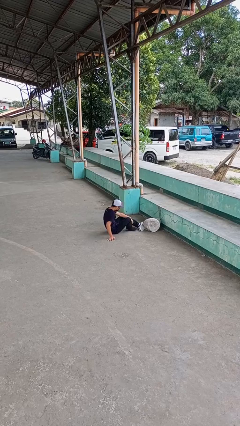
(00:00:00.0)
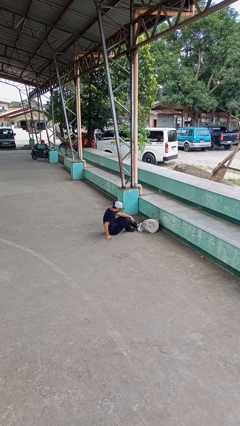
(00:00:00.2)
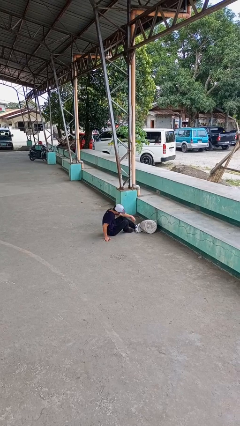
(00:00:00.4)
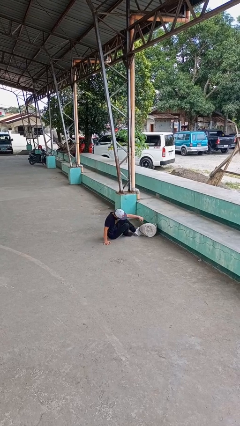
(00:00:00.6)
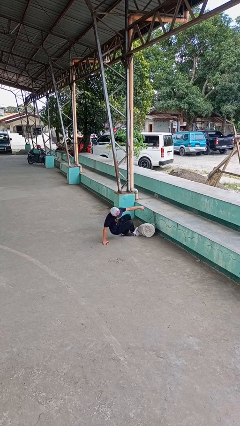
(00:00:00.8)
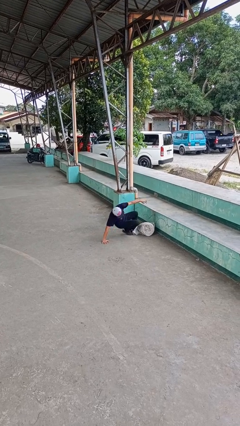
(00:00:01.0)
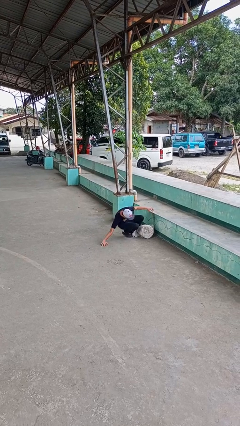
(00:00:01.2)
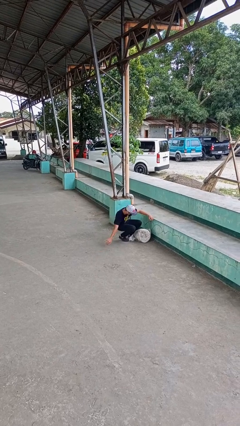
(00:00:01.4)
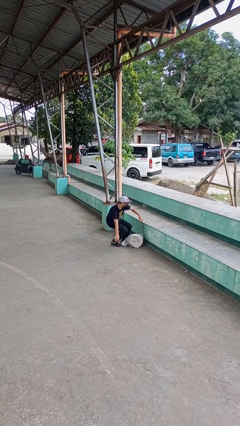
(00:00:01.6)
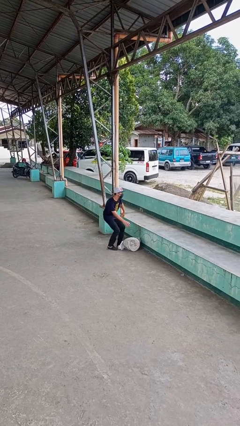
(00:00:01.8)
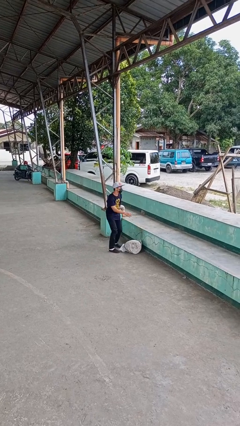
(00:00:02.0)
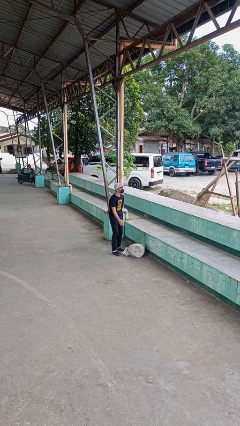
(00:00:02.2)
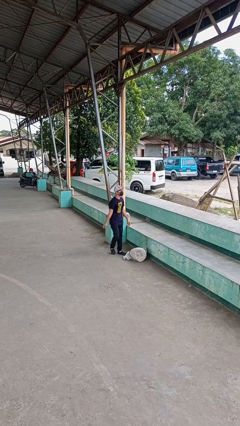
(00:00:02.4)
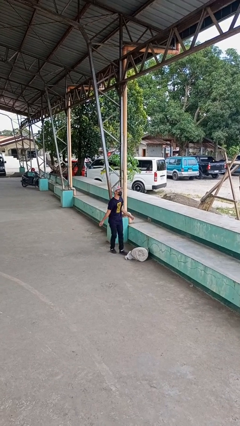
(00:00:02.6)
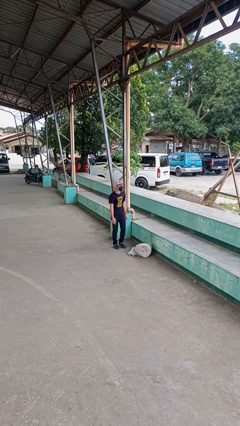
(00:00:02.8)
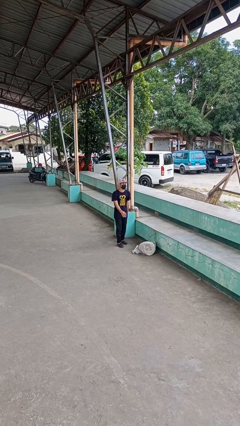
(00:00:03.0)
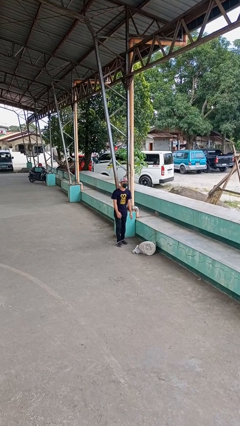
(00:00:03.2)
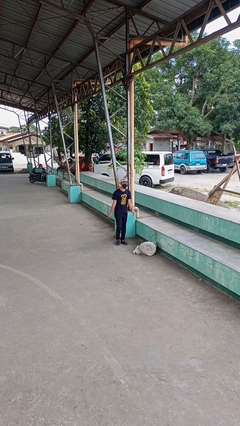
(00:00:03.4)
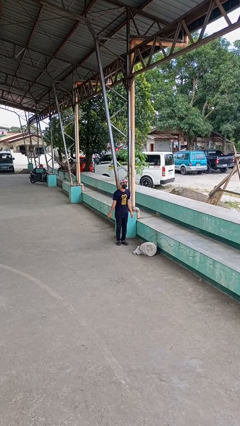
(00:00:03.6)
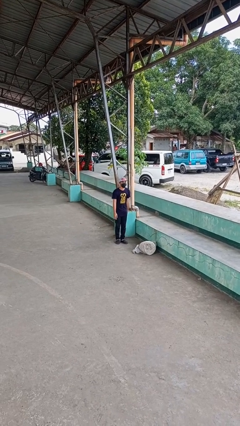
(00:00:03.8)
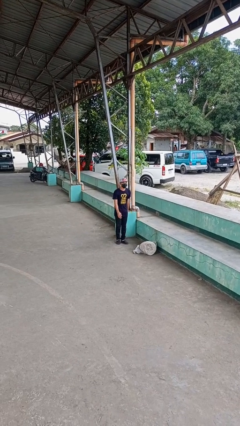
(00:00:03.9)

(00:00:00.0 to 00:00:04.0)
person stands up from floor

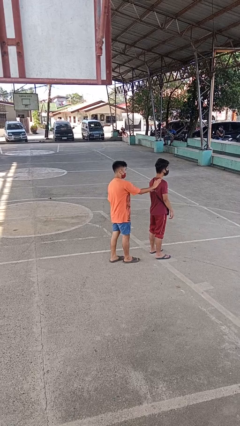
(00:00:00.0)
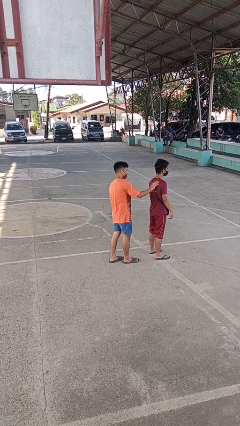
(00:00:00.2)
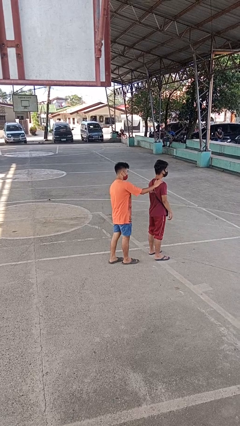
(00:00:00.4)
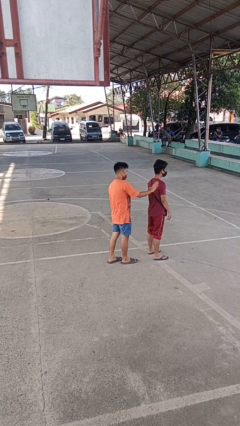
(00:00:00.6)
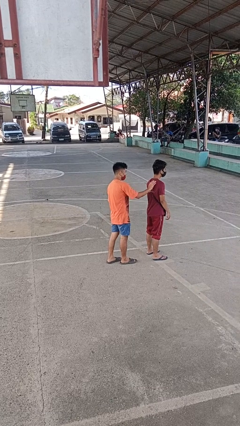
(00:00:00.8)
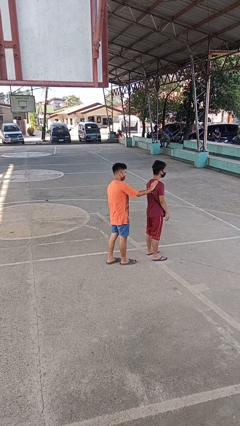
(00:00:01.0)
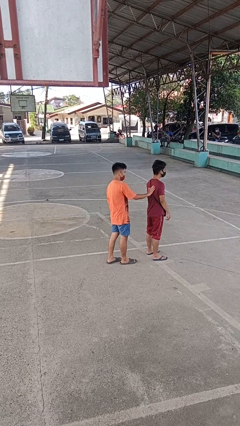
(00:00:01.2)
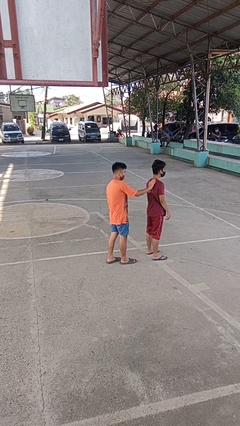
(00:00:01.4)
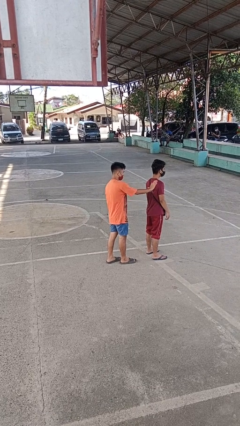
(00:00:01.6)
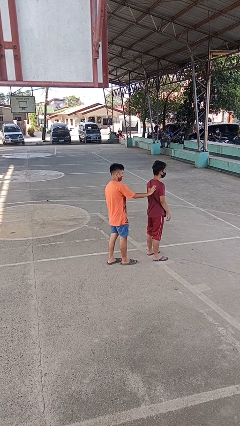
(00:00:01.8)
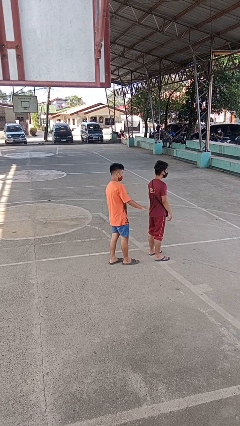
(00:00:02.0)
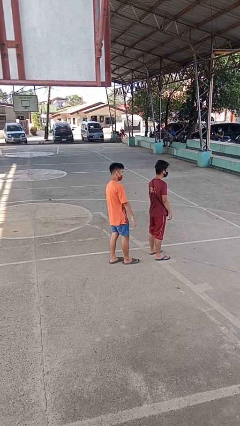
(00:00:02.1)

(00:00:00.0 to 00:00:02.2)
person touches back of person

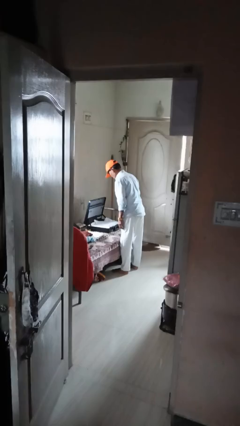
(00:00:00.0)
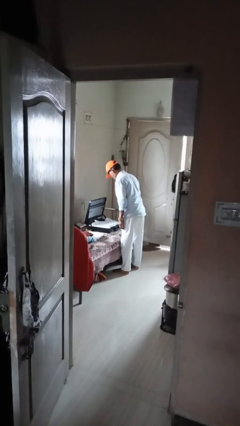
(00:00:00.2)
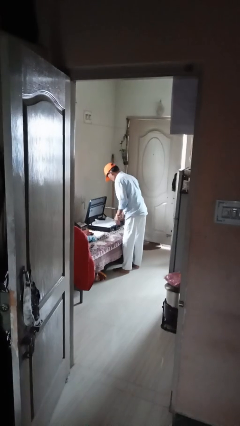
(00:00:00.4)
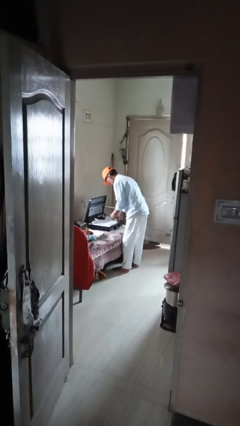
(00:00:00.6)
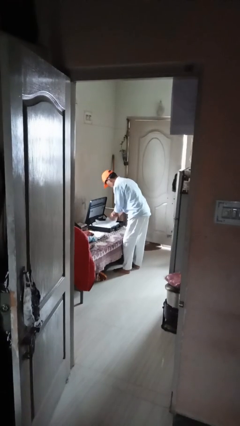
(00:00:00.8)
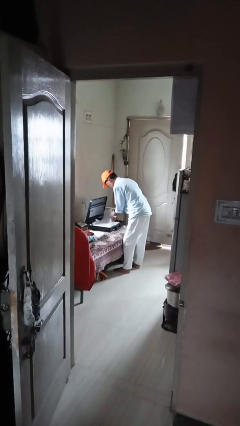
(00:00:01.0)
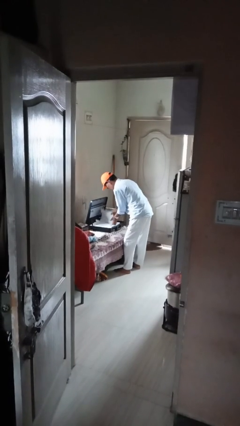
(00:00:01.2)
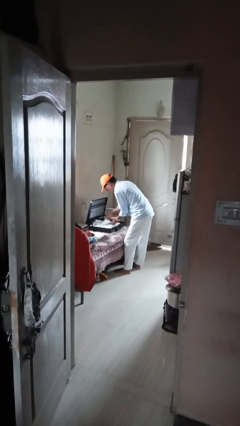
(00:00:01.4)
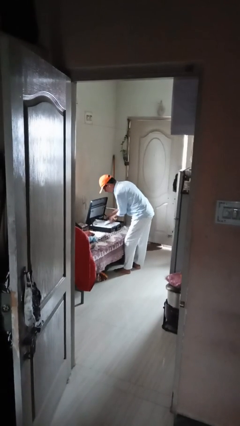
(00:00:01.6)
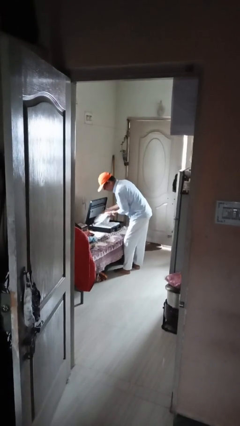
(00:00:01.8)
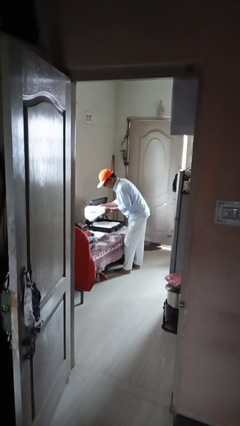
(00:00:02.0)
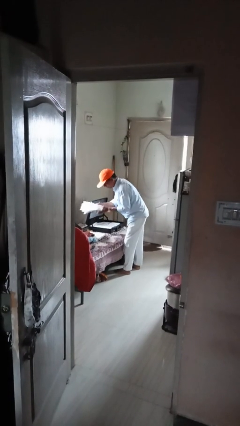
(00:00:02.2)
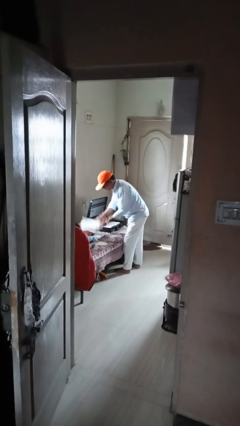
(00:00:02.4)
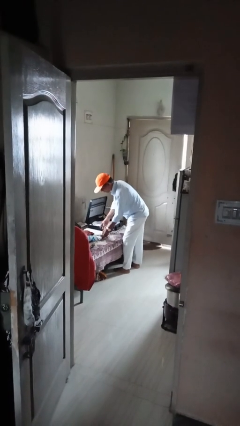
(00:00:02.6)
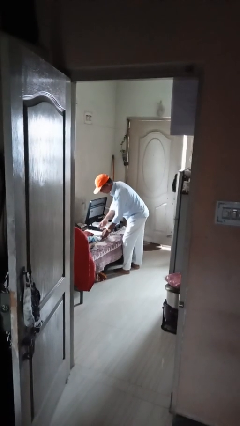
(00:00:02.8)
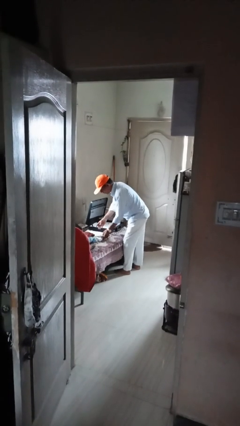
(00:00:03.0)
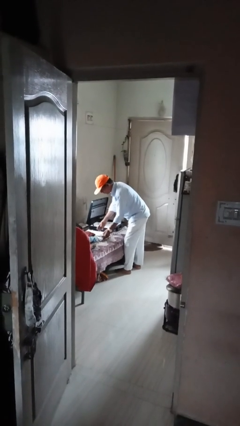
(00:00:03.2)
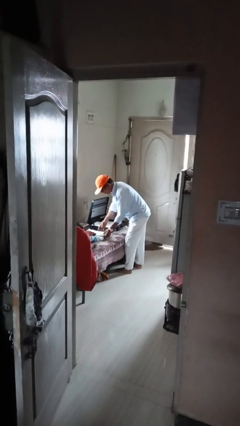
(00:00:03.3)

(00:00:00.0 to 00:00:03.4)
person unloads clothes from suitcase

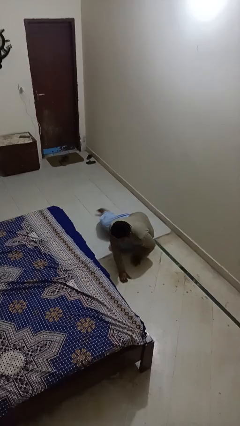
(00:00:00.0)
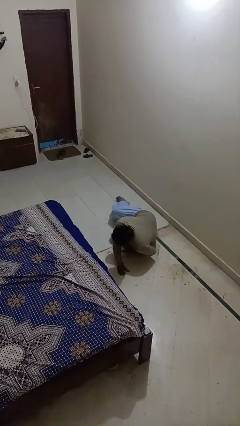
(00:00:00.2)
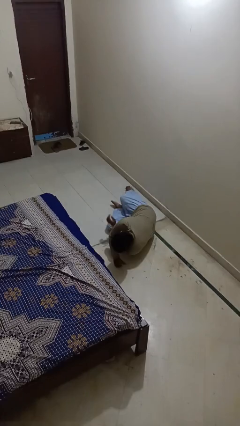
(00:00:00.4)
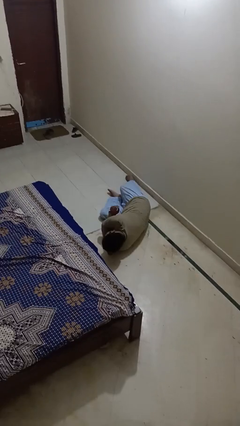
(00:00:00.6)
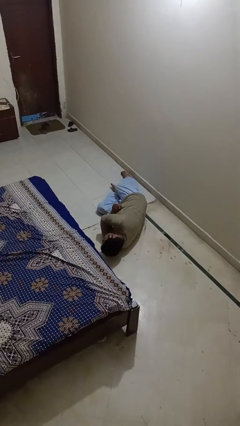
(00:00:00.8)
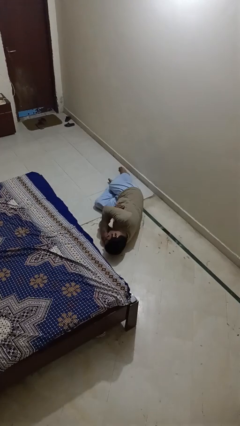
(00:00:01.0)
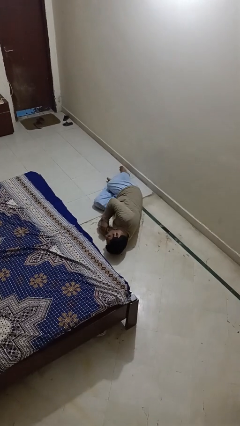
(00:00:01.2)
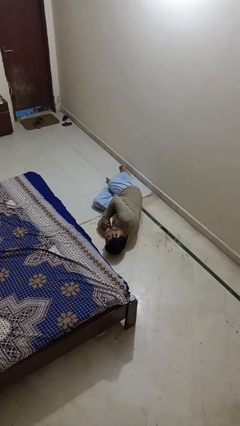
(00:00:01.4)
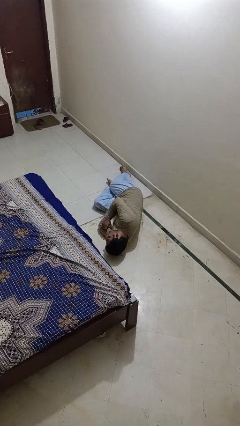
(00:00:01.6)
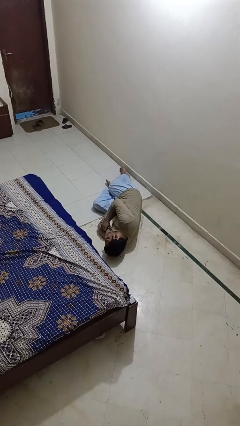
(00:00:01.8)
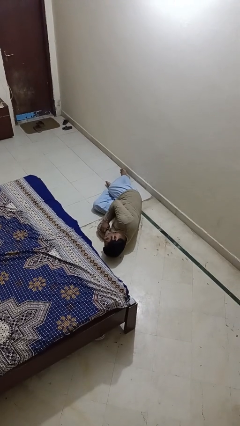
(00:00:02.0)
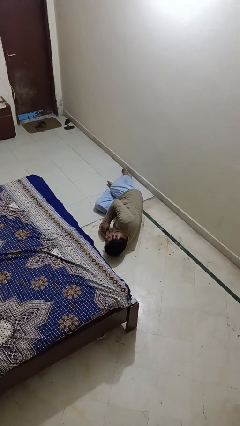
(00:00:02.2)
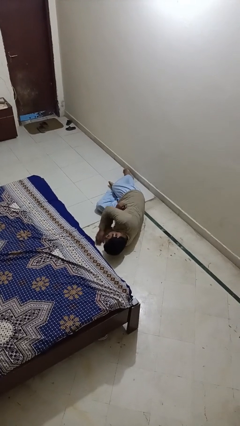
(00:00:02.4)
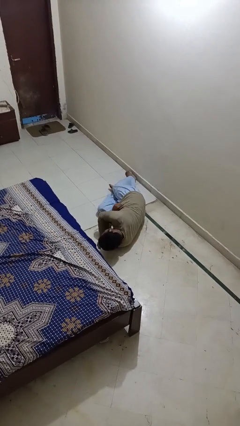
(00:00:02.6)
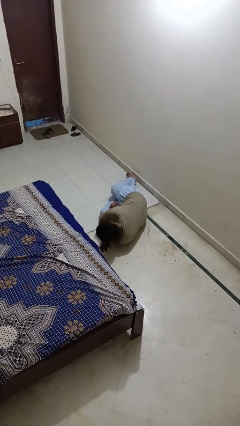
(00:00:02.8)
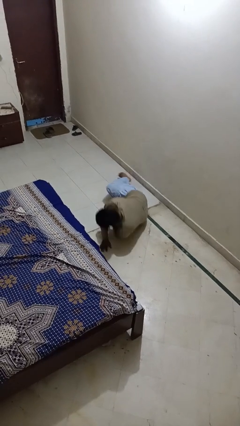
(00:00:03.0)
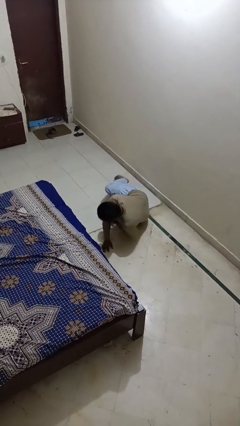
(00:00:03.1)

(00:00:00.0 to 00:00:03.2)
person lies down on floor

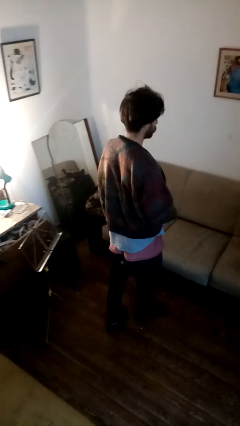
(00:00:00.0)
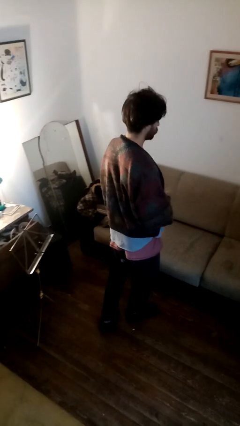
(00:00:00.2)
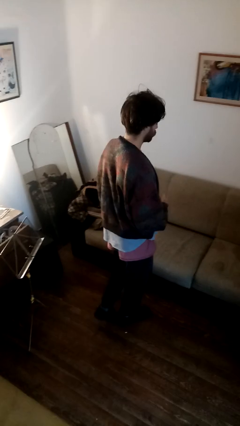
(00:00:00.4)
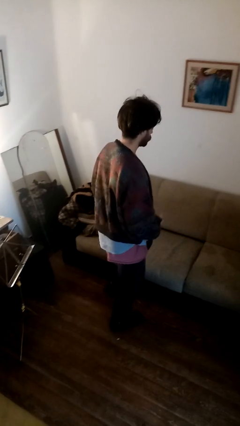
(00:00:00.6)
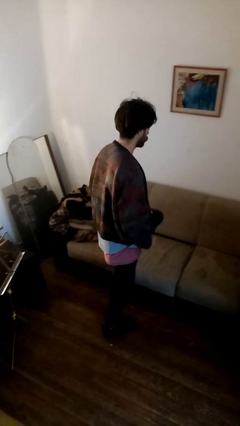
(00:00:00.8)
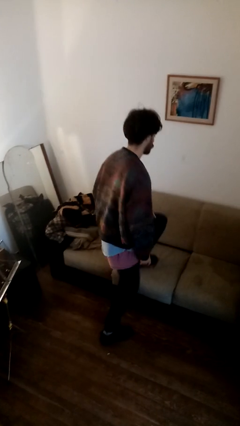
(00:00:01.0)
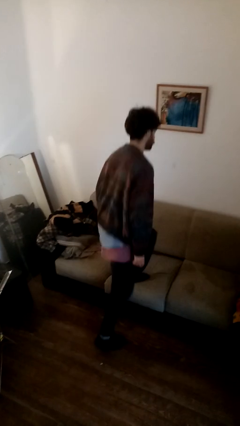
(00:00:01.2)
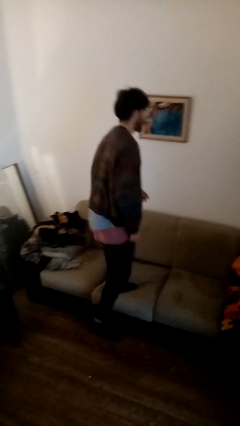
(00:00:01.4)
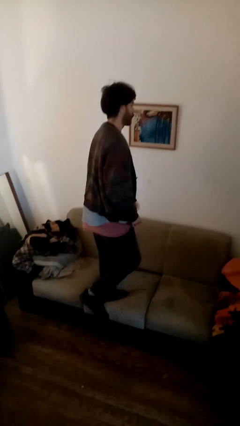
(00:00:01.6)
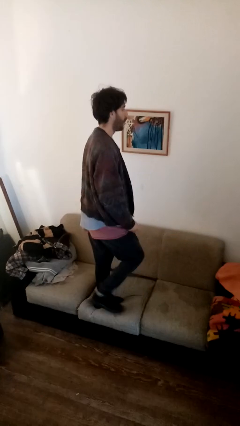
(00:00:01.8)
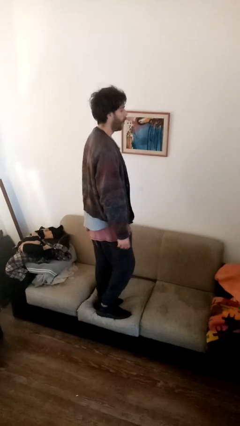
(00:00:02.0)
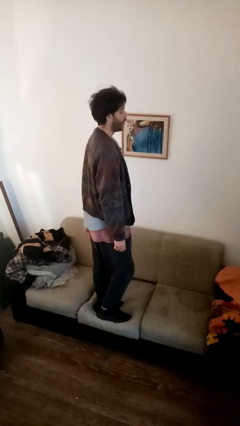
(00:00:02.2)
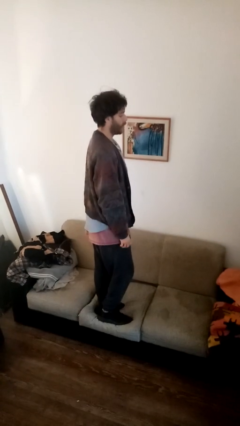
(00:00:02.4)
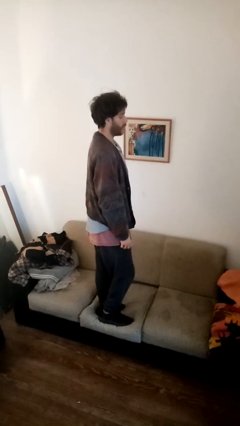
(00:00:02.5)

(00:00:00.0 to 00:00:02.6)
person climbs on couch

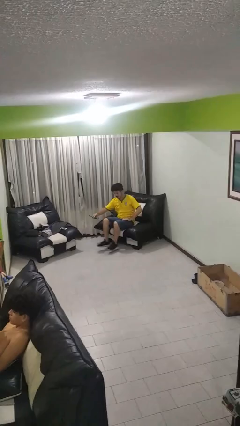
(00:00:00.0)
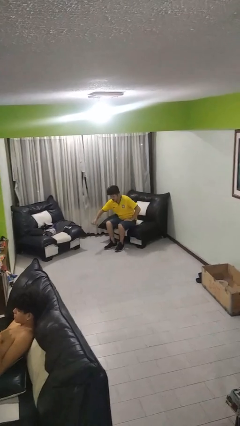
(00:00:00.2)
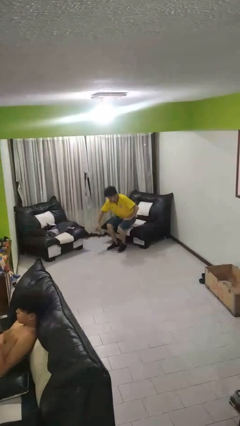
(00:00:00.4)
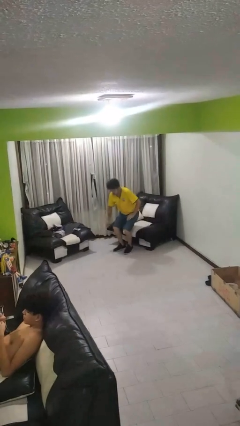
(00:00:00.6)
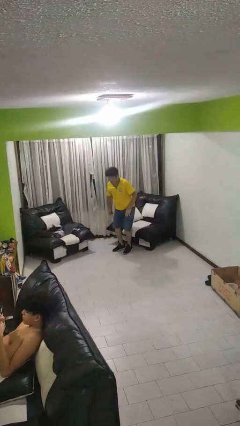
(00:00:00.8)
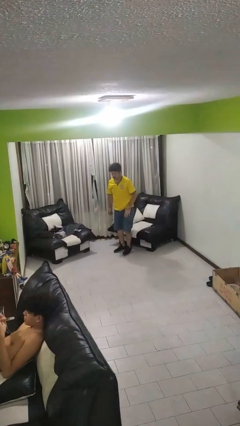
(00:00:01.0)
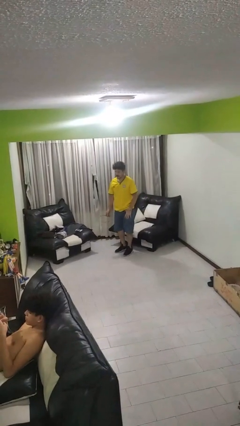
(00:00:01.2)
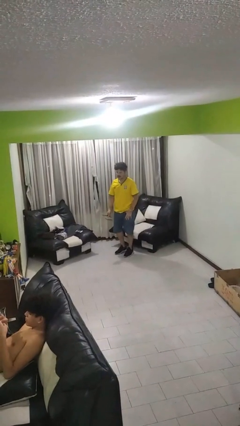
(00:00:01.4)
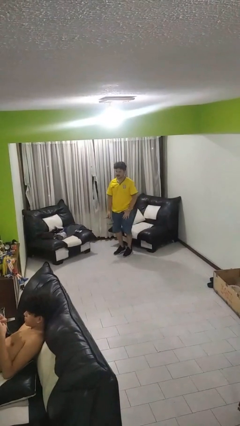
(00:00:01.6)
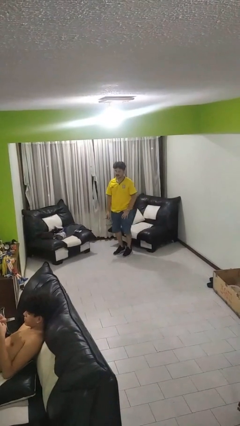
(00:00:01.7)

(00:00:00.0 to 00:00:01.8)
person stands up
